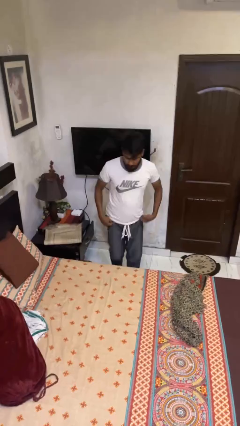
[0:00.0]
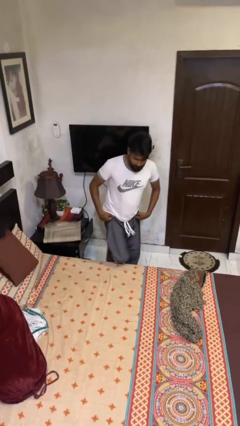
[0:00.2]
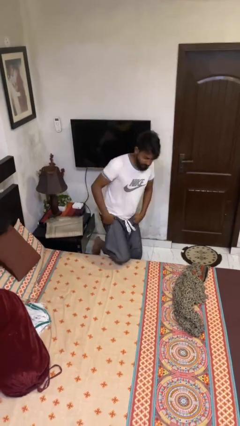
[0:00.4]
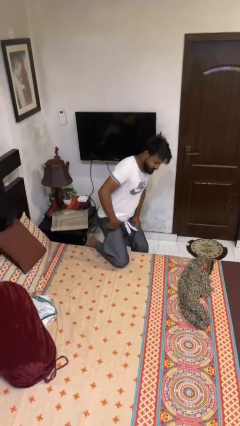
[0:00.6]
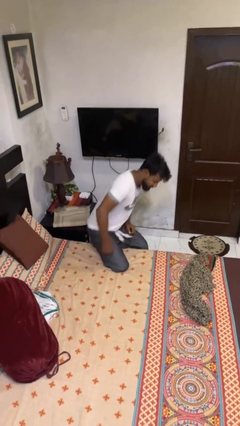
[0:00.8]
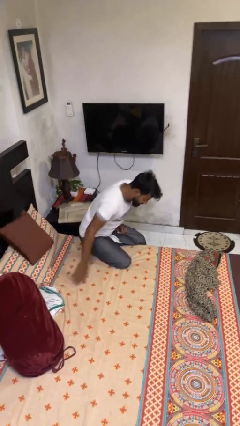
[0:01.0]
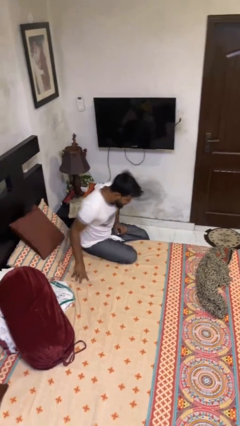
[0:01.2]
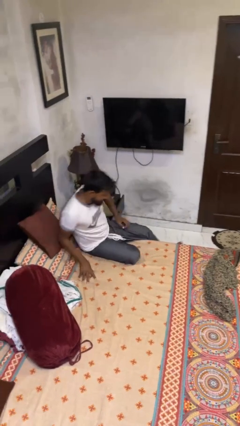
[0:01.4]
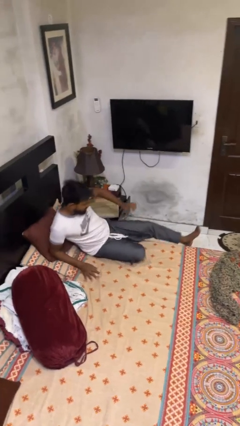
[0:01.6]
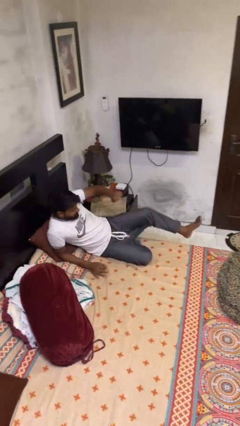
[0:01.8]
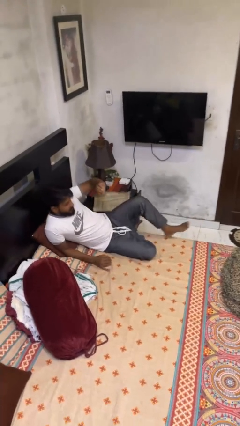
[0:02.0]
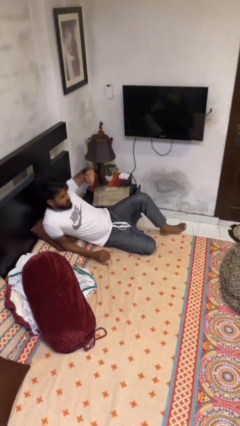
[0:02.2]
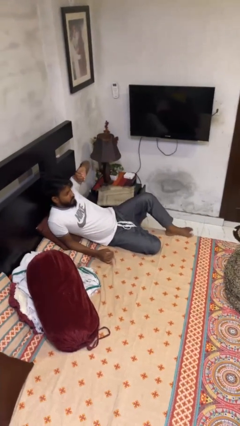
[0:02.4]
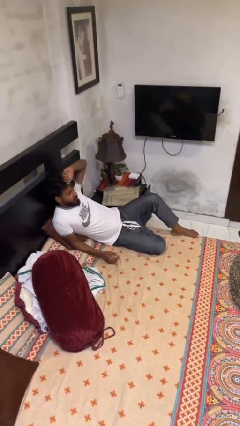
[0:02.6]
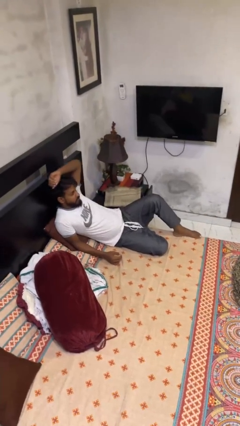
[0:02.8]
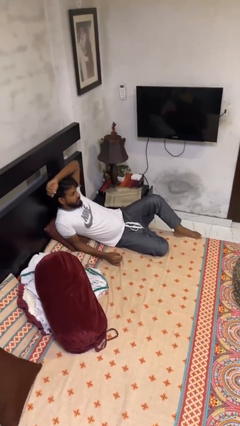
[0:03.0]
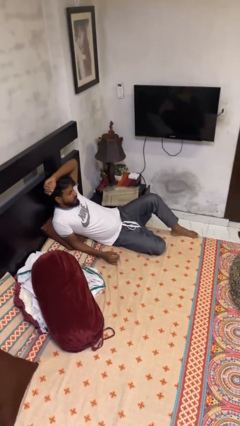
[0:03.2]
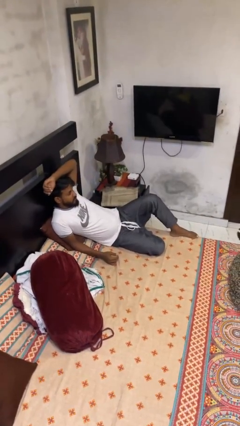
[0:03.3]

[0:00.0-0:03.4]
person lies down on bed

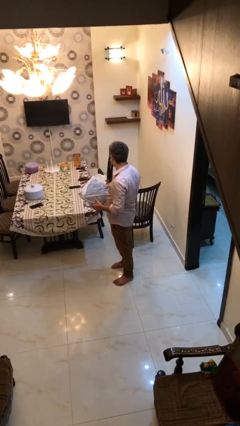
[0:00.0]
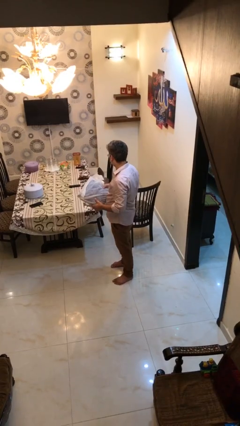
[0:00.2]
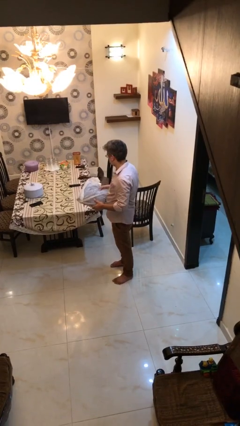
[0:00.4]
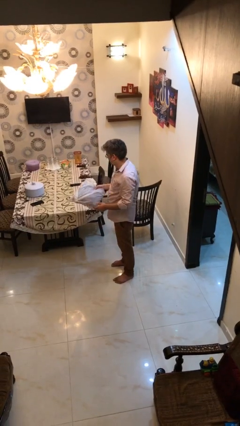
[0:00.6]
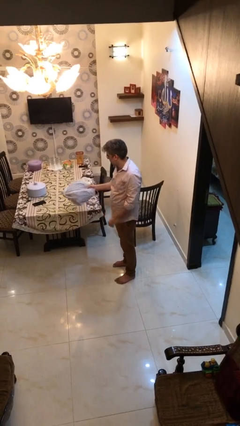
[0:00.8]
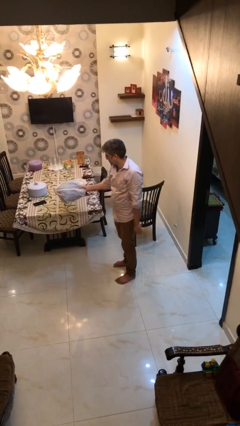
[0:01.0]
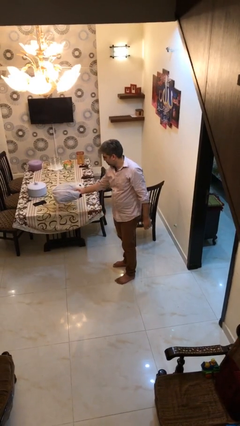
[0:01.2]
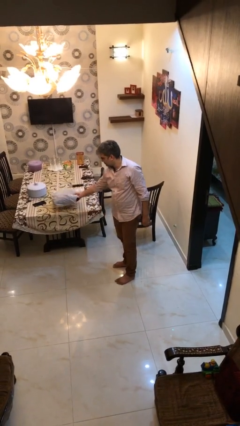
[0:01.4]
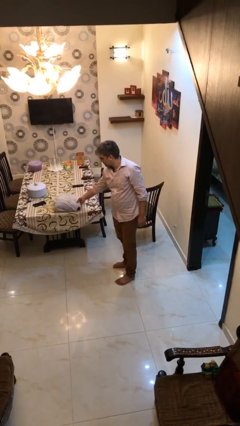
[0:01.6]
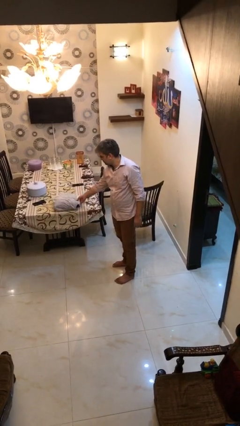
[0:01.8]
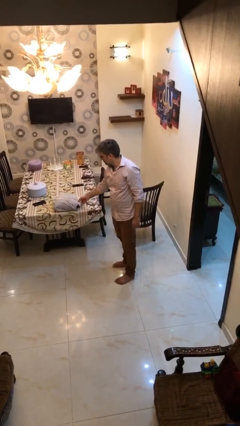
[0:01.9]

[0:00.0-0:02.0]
person puts down object on table

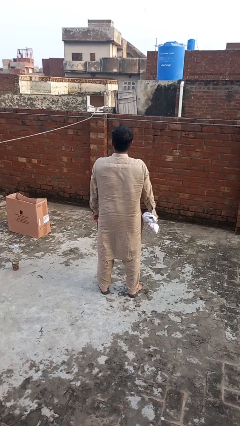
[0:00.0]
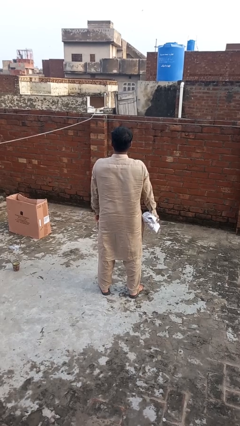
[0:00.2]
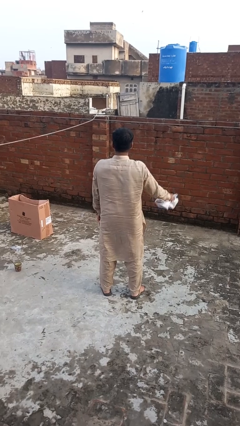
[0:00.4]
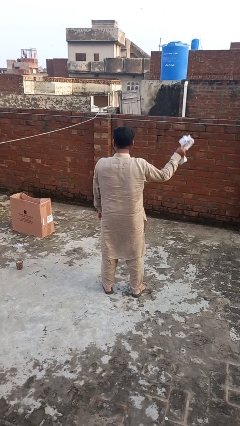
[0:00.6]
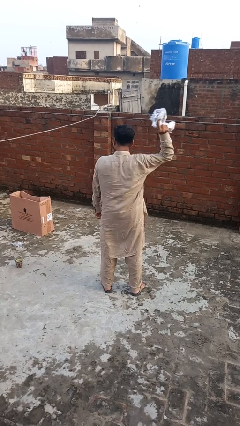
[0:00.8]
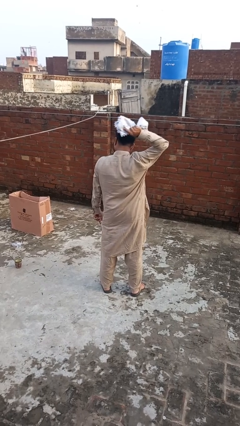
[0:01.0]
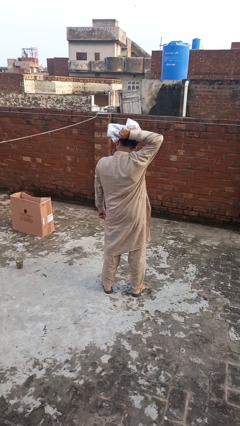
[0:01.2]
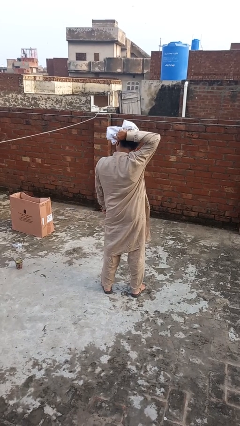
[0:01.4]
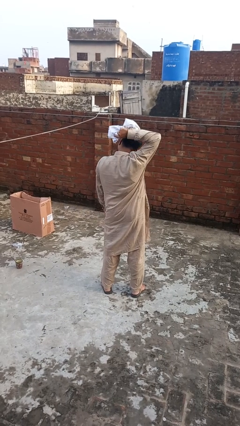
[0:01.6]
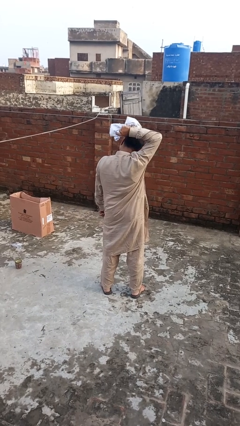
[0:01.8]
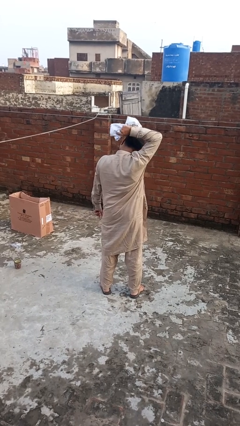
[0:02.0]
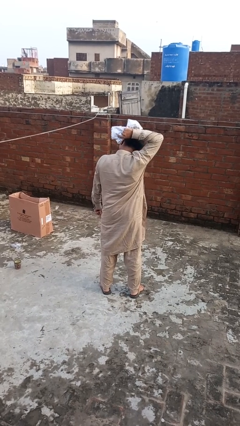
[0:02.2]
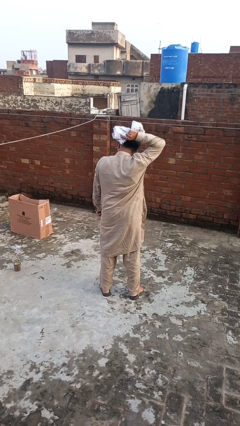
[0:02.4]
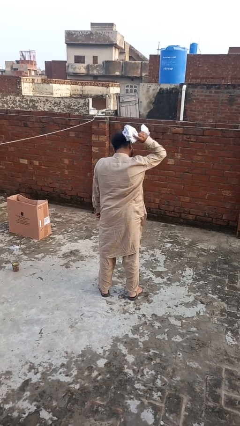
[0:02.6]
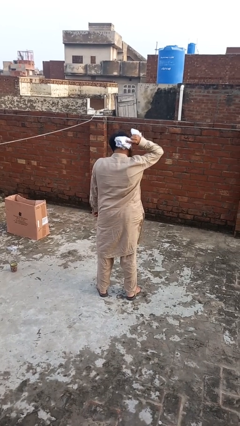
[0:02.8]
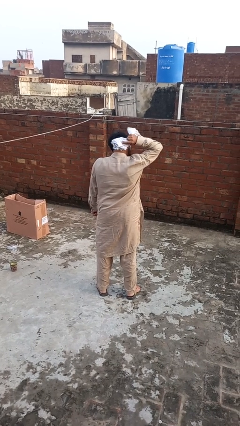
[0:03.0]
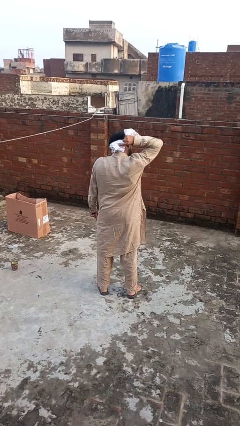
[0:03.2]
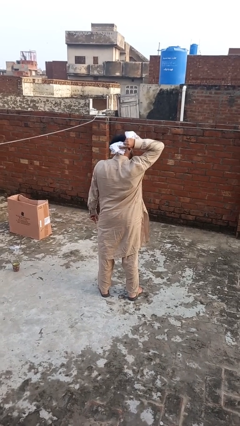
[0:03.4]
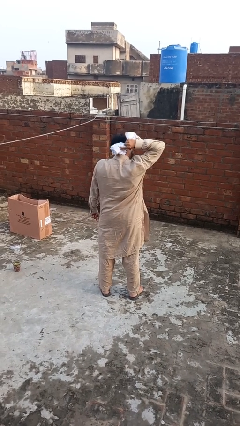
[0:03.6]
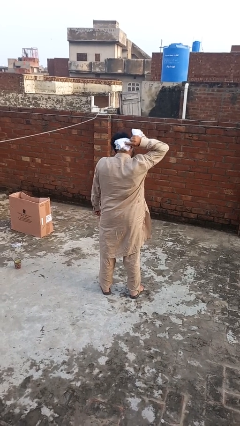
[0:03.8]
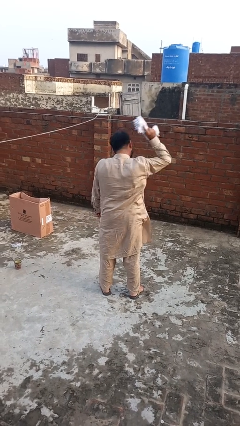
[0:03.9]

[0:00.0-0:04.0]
person dries hair with towel

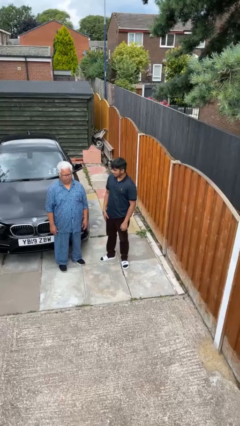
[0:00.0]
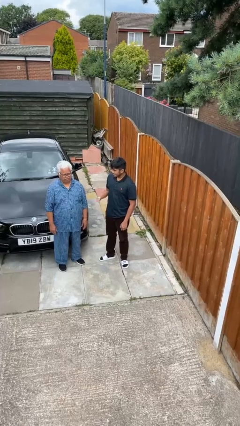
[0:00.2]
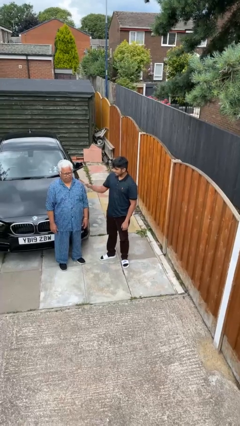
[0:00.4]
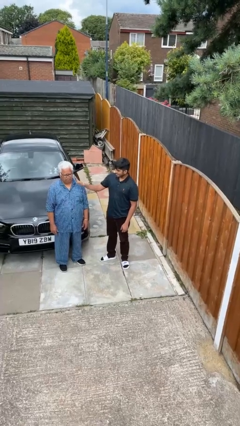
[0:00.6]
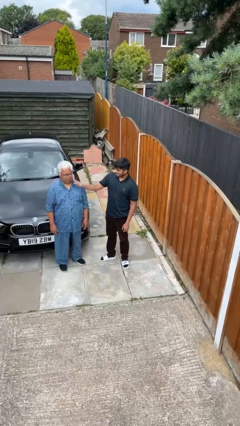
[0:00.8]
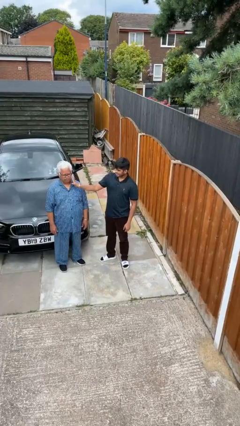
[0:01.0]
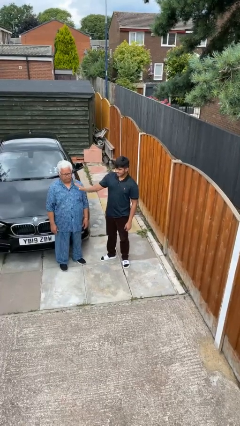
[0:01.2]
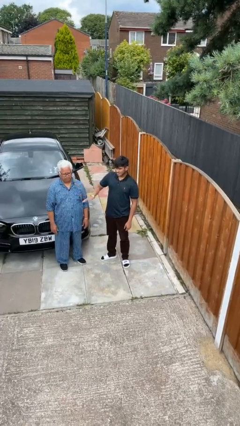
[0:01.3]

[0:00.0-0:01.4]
person touches face of person

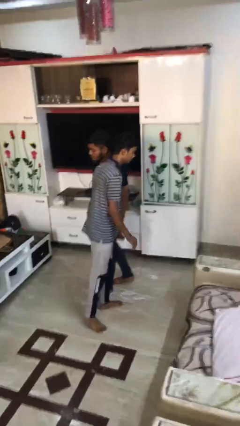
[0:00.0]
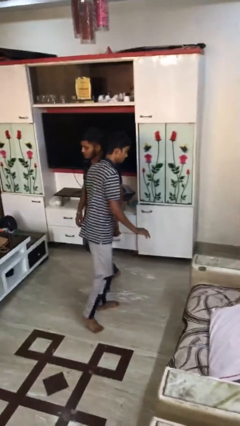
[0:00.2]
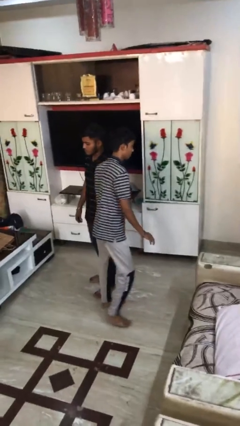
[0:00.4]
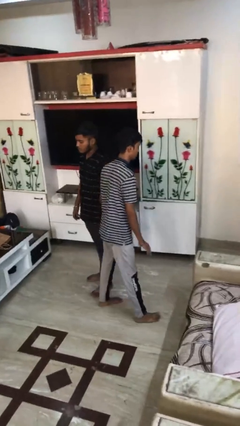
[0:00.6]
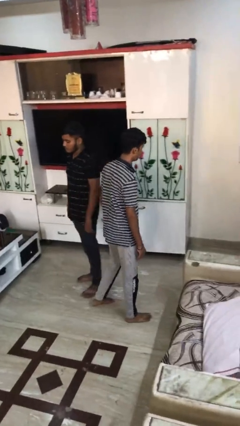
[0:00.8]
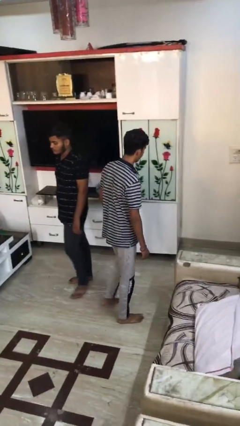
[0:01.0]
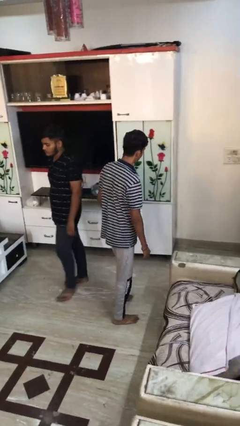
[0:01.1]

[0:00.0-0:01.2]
person bumps into person

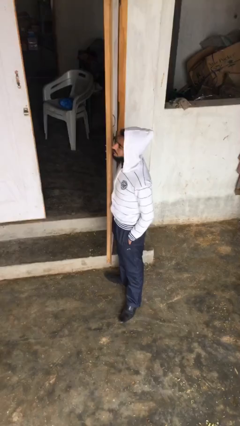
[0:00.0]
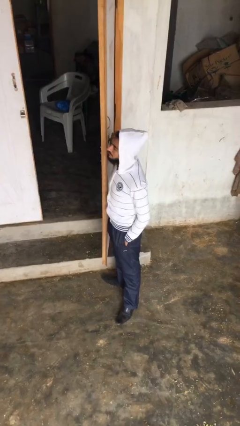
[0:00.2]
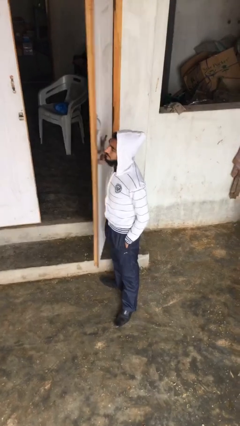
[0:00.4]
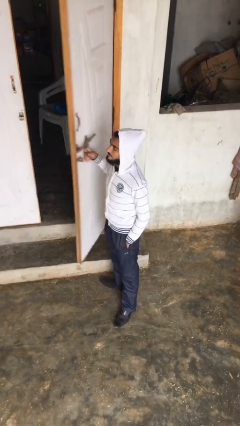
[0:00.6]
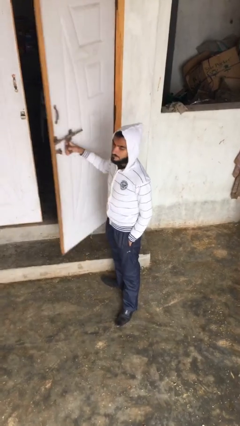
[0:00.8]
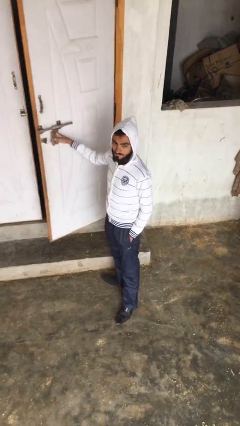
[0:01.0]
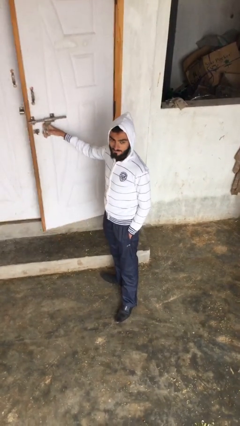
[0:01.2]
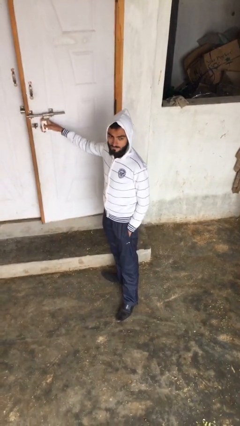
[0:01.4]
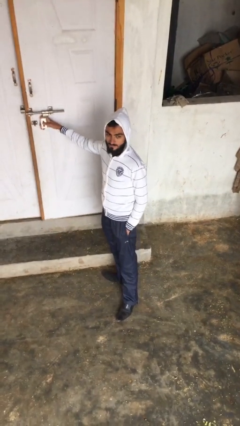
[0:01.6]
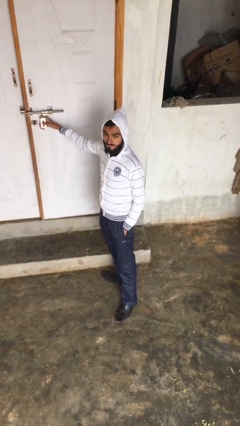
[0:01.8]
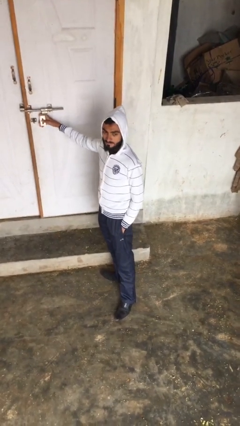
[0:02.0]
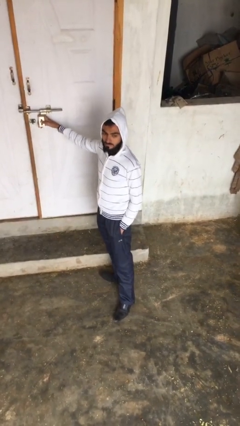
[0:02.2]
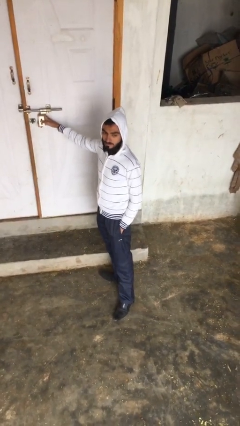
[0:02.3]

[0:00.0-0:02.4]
person closes facility door

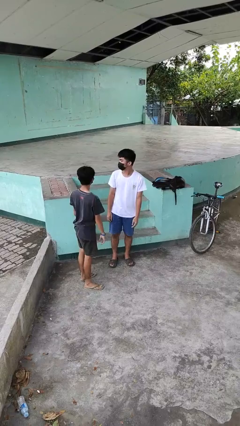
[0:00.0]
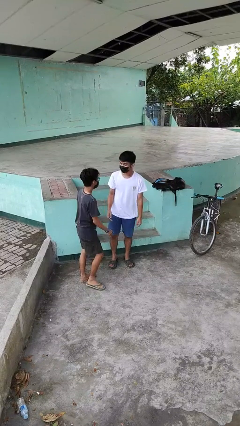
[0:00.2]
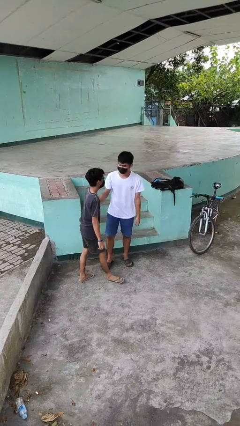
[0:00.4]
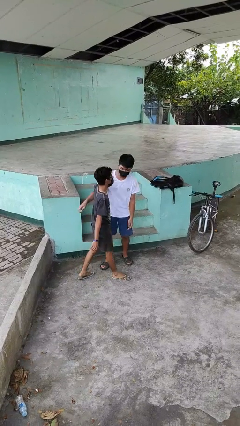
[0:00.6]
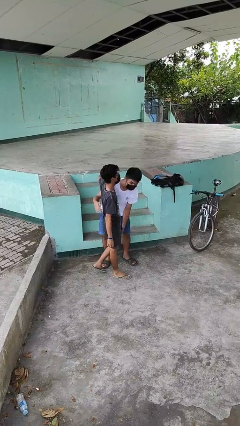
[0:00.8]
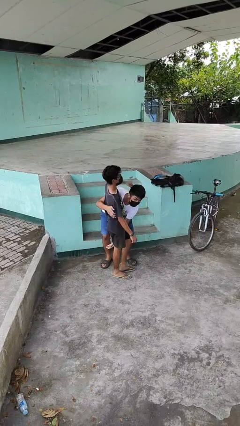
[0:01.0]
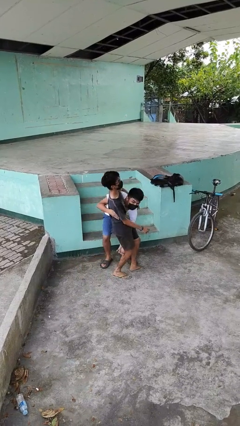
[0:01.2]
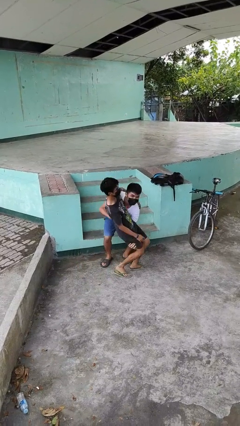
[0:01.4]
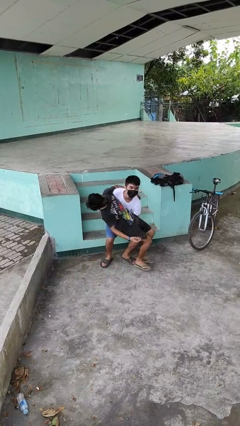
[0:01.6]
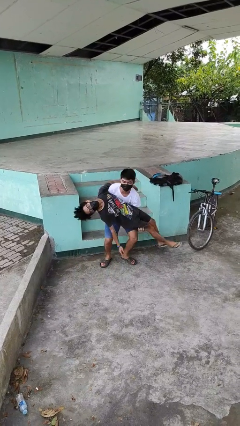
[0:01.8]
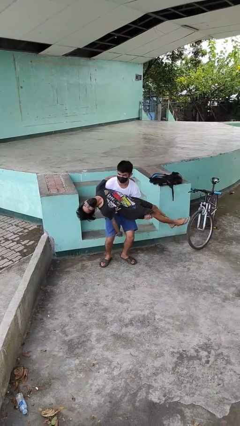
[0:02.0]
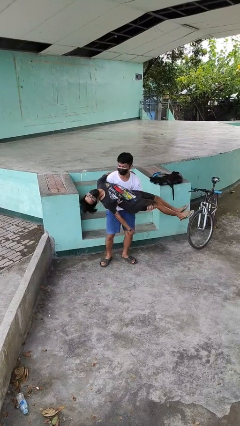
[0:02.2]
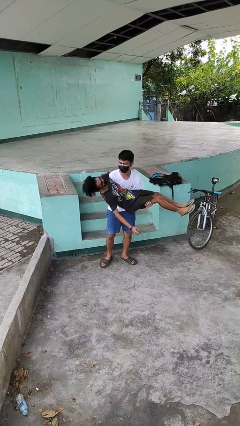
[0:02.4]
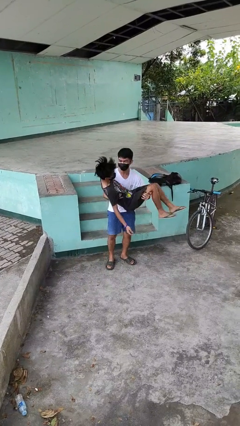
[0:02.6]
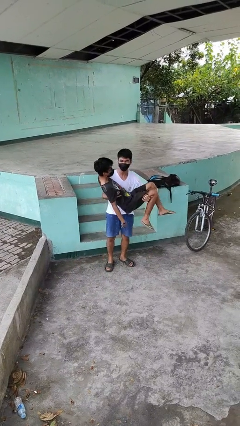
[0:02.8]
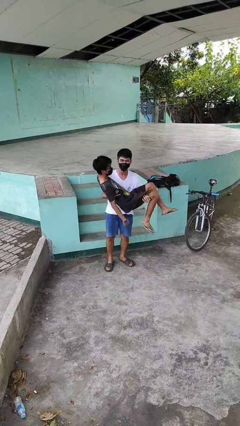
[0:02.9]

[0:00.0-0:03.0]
person picks up person
